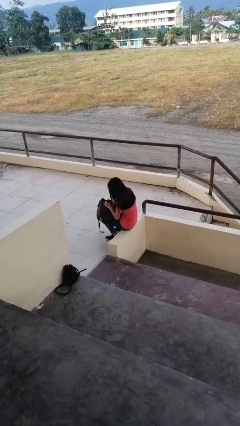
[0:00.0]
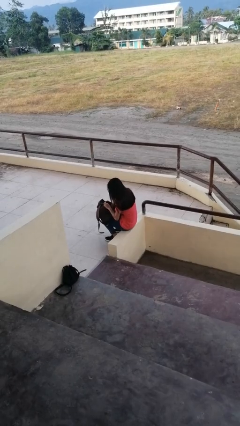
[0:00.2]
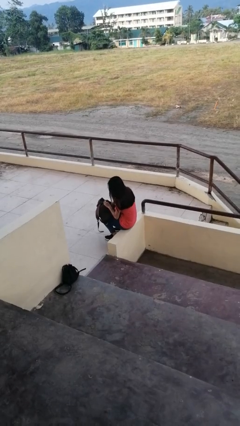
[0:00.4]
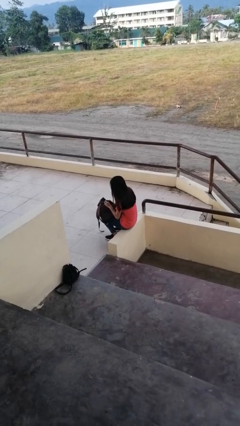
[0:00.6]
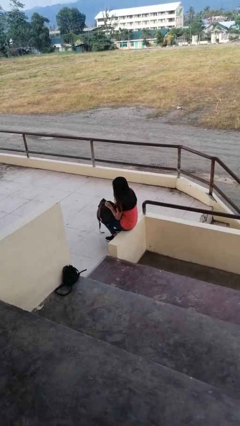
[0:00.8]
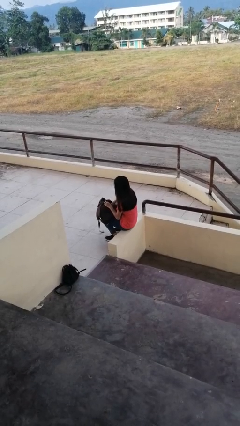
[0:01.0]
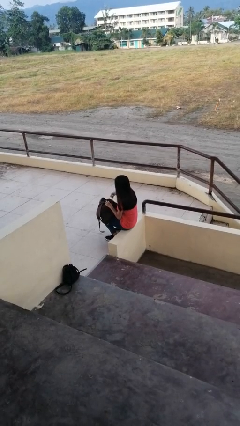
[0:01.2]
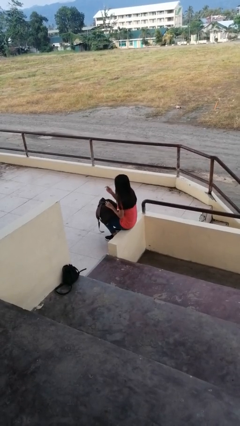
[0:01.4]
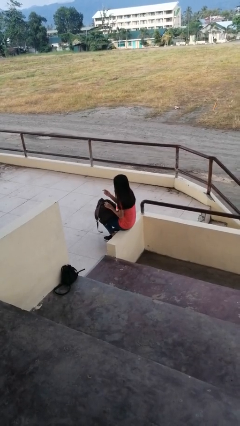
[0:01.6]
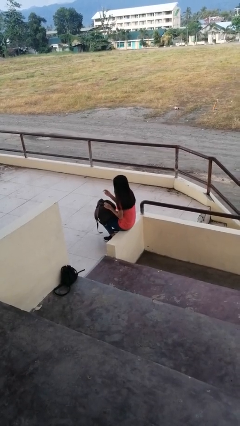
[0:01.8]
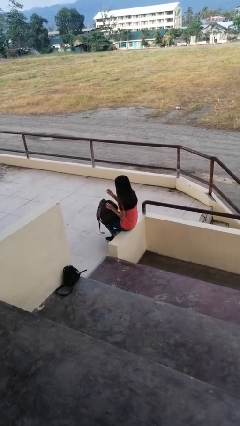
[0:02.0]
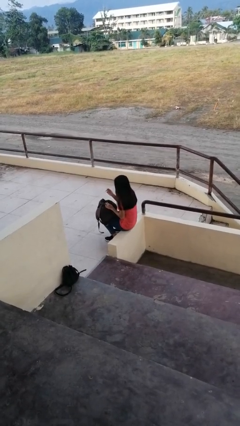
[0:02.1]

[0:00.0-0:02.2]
person takes object from backpack

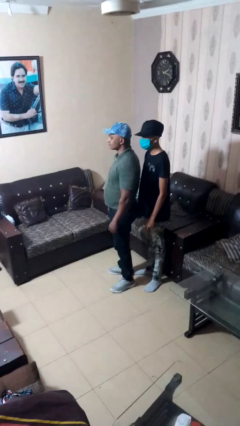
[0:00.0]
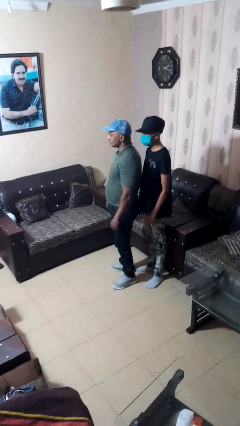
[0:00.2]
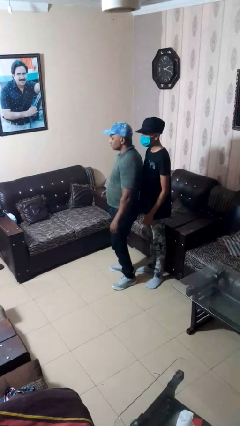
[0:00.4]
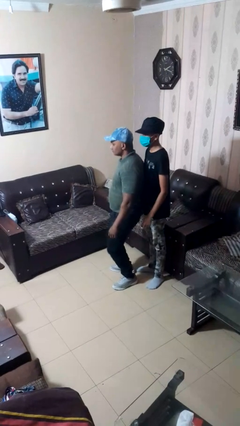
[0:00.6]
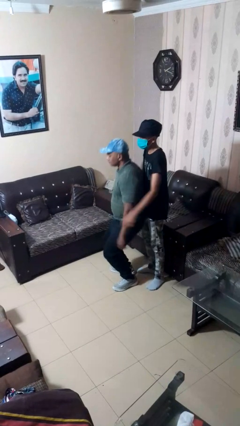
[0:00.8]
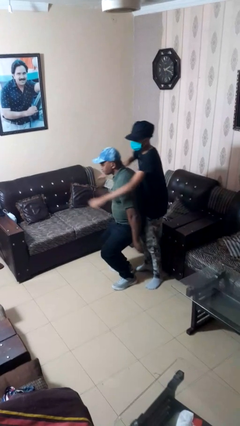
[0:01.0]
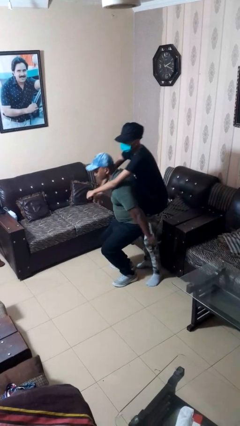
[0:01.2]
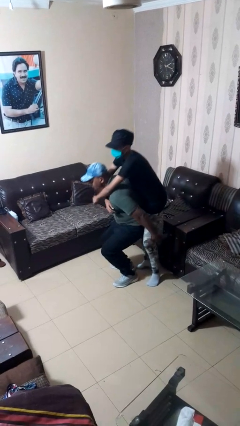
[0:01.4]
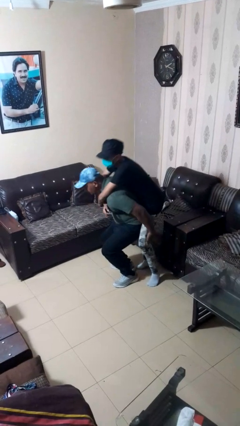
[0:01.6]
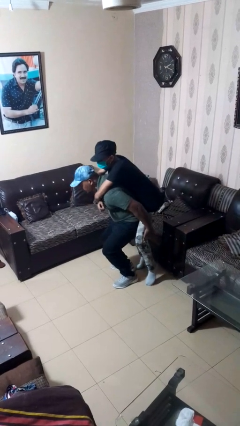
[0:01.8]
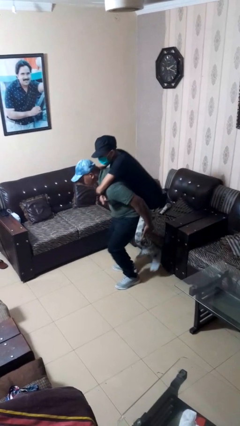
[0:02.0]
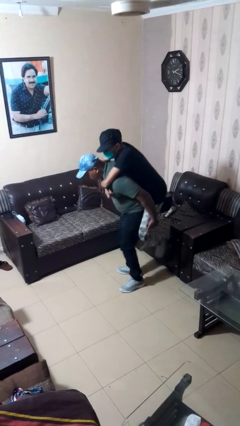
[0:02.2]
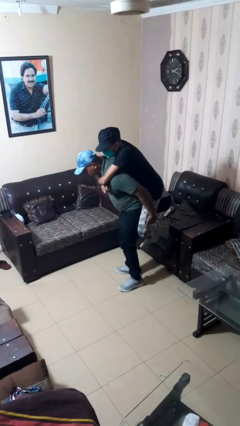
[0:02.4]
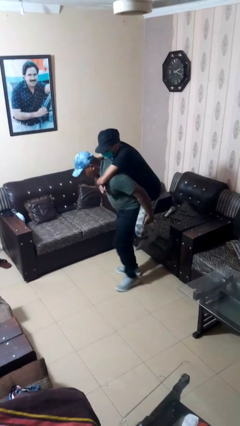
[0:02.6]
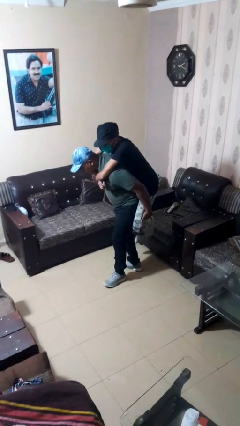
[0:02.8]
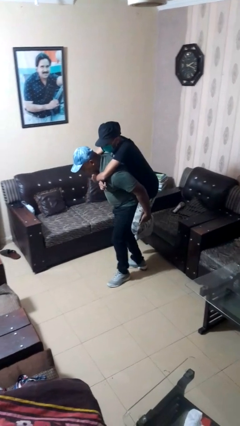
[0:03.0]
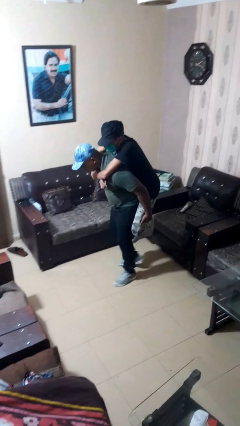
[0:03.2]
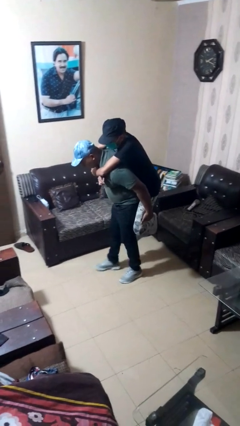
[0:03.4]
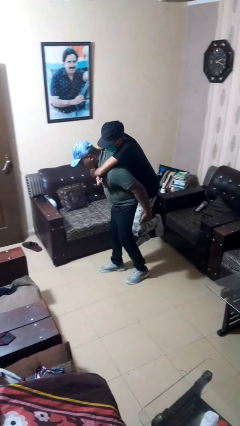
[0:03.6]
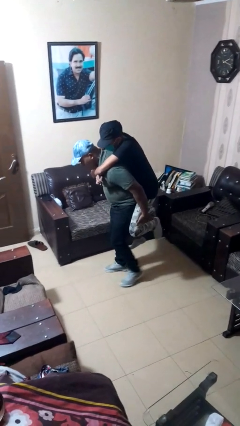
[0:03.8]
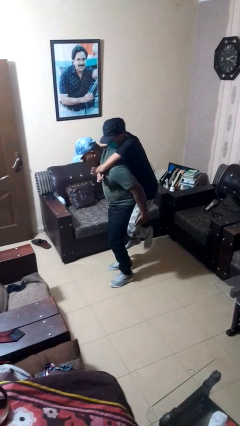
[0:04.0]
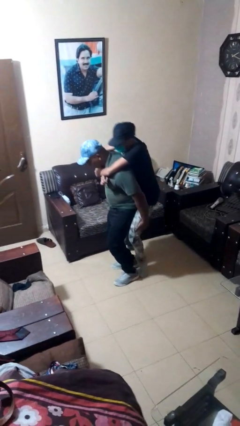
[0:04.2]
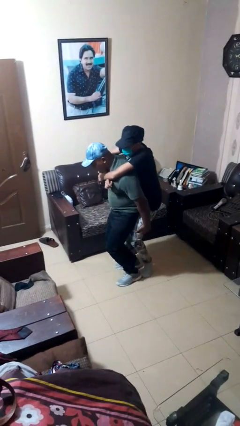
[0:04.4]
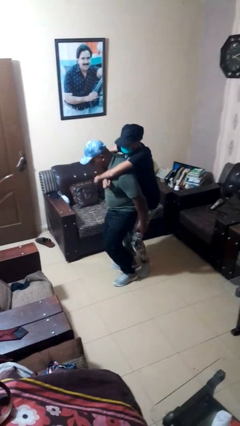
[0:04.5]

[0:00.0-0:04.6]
person carries person on back

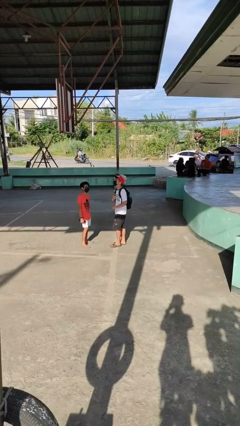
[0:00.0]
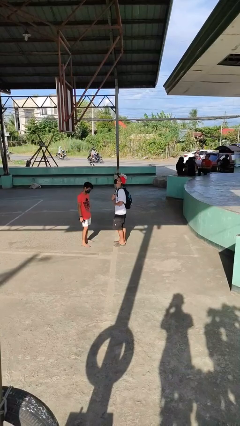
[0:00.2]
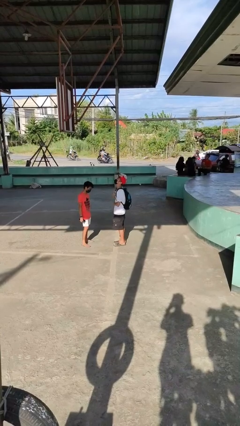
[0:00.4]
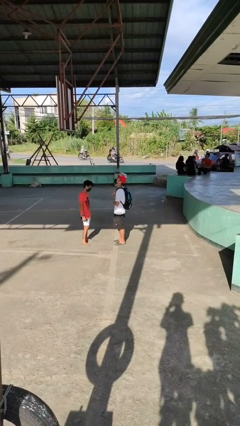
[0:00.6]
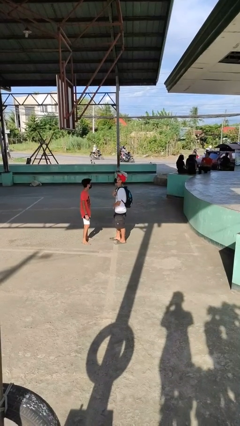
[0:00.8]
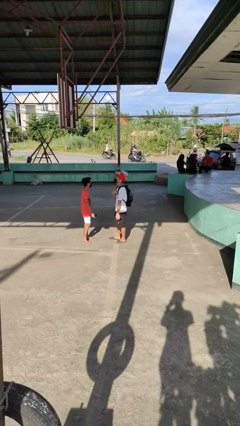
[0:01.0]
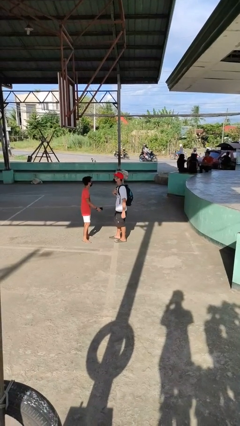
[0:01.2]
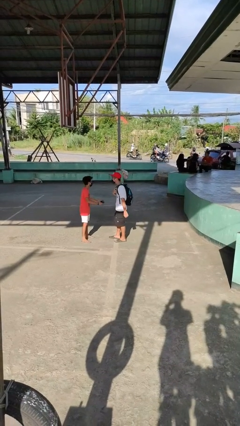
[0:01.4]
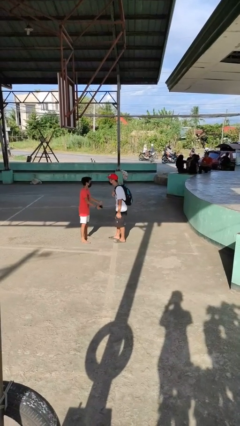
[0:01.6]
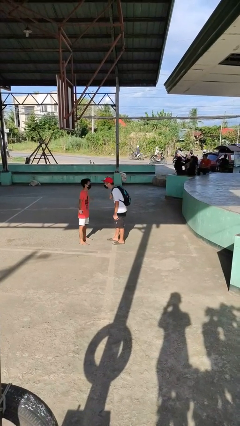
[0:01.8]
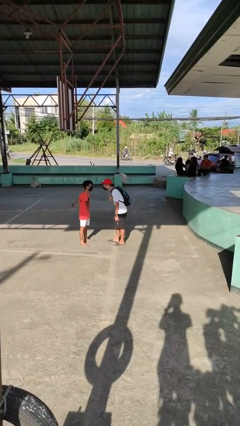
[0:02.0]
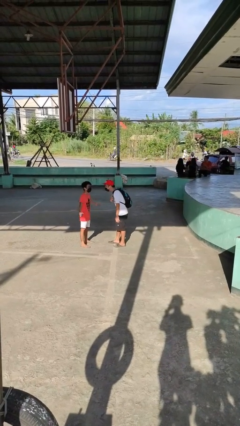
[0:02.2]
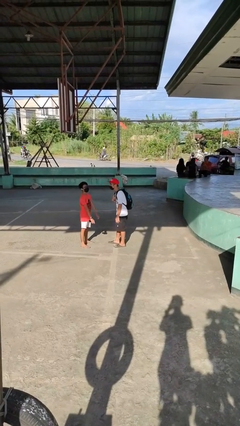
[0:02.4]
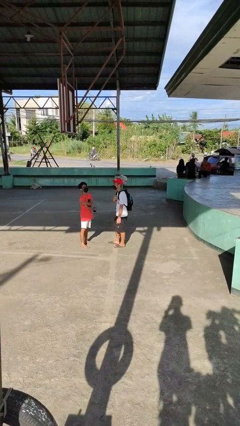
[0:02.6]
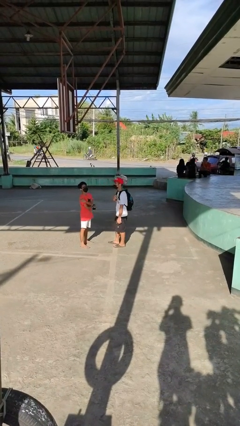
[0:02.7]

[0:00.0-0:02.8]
person laughs with person

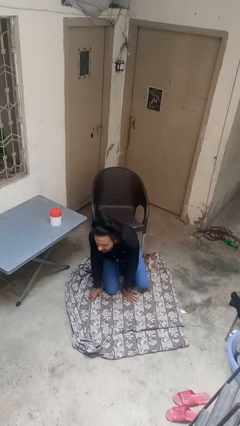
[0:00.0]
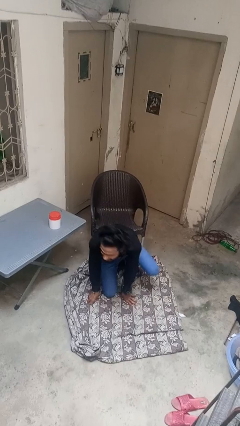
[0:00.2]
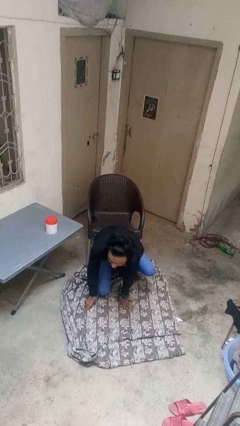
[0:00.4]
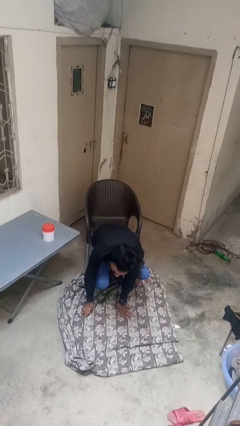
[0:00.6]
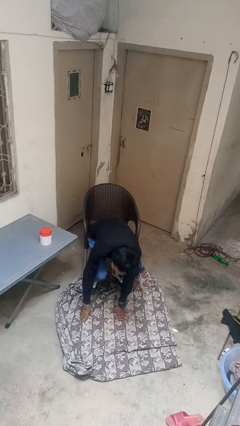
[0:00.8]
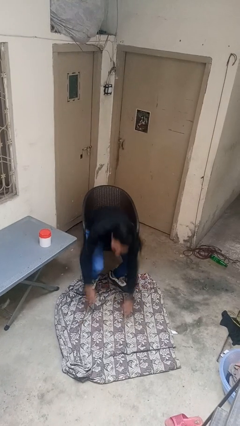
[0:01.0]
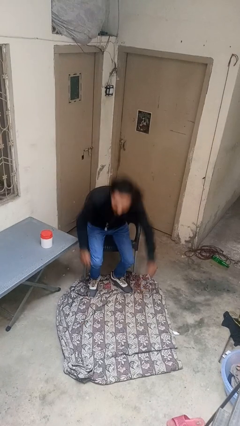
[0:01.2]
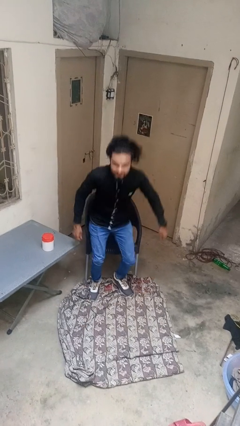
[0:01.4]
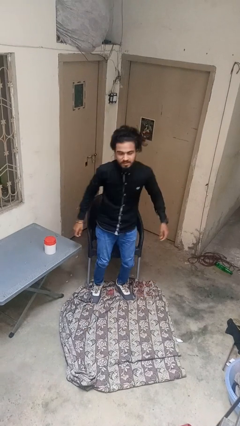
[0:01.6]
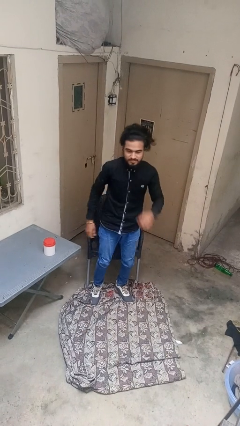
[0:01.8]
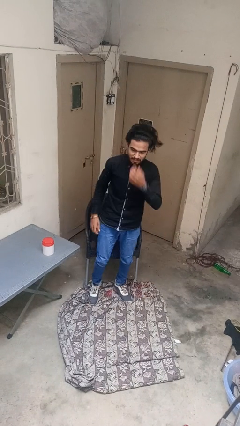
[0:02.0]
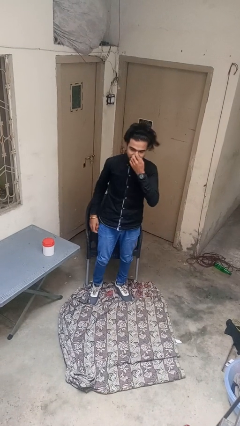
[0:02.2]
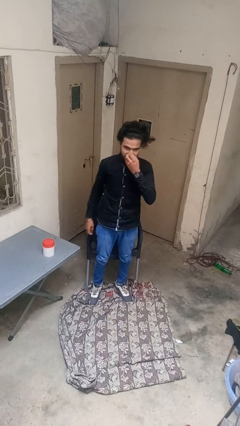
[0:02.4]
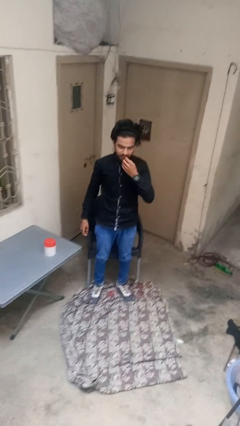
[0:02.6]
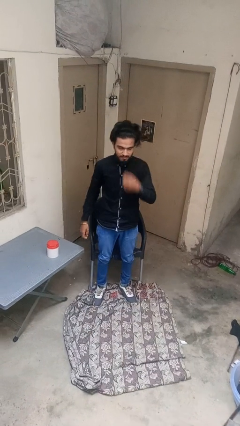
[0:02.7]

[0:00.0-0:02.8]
person stands up from floor

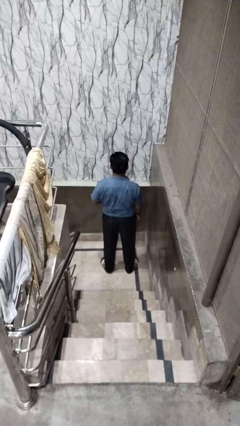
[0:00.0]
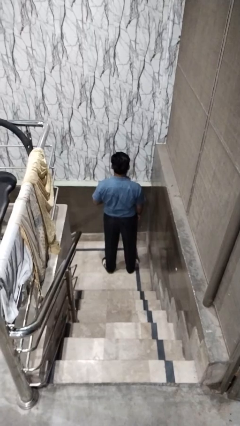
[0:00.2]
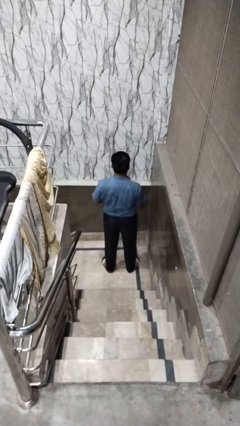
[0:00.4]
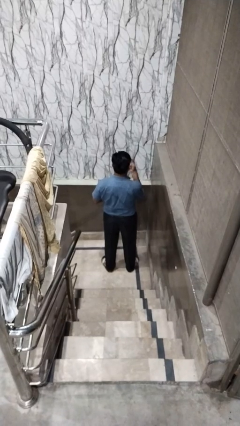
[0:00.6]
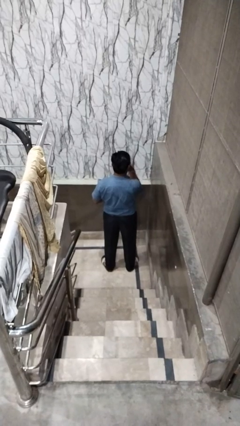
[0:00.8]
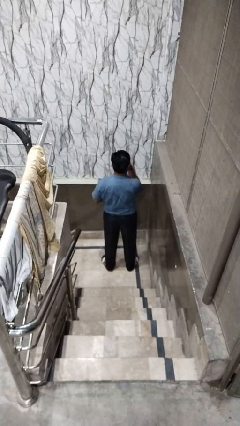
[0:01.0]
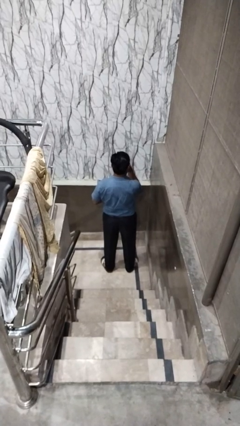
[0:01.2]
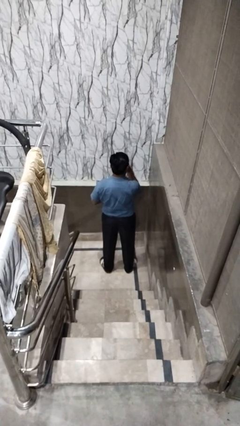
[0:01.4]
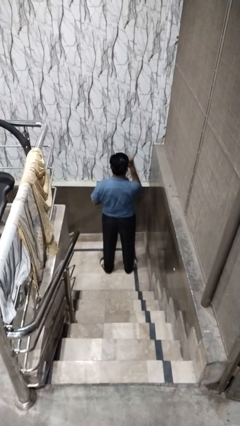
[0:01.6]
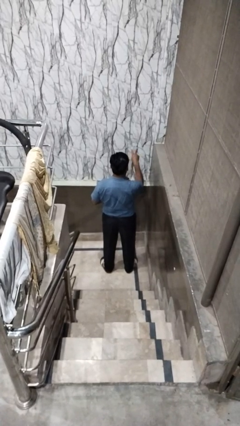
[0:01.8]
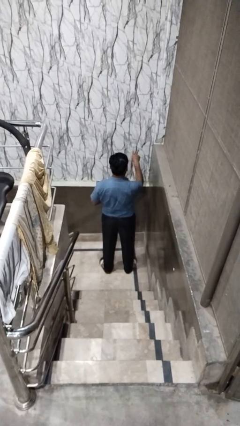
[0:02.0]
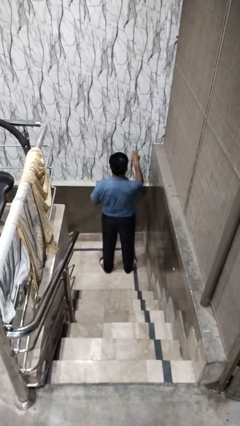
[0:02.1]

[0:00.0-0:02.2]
person gestures watch closely

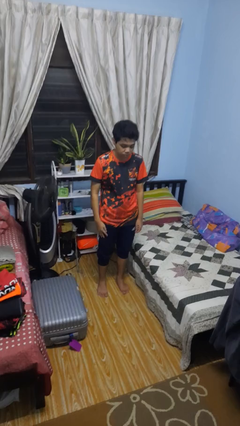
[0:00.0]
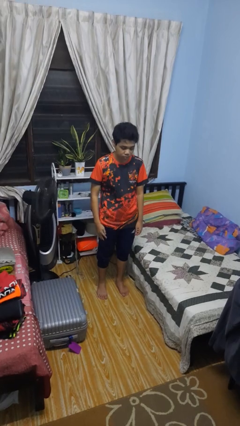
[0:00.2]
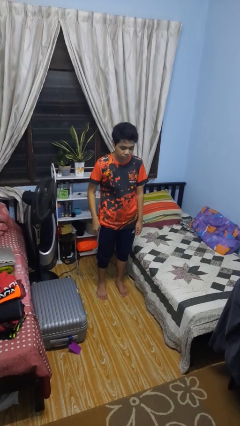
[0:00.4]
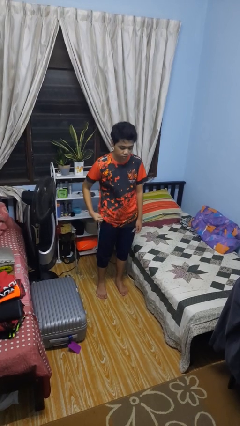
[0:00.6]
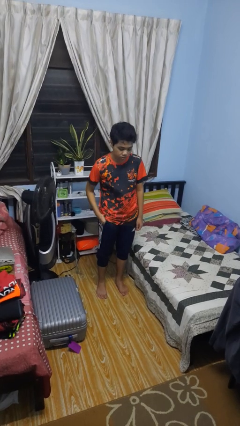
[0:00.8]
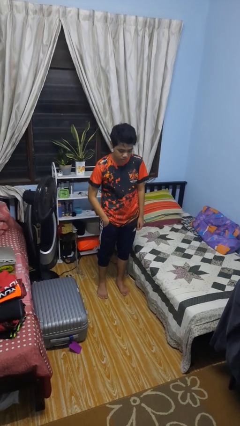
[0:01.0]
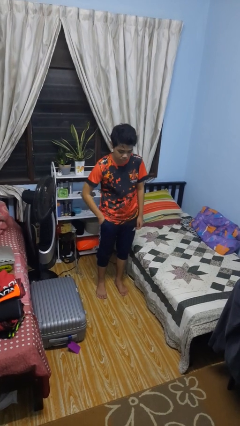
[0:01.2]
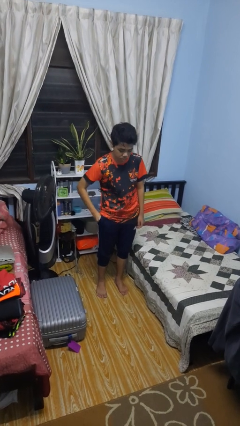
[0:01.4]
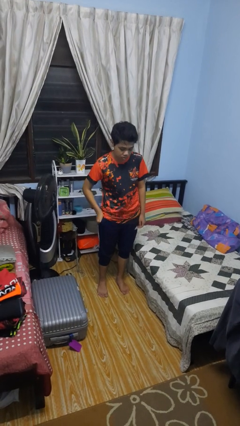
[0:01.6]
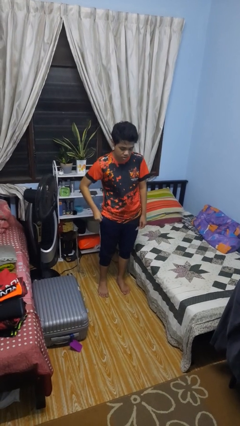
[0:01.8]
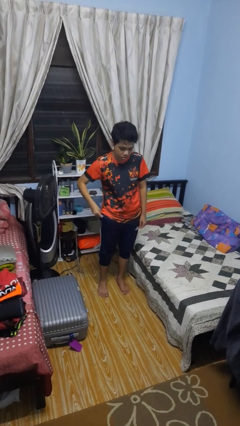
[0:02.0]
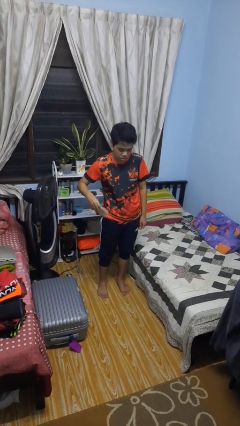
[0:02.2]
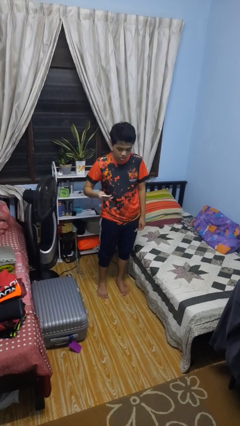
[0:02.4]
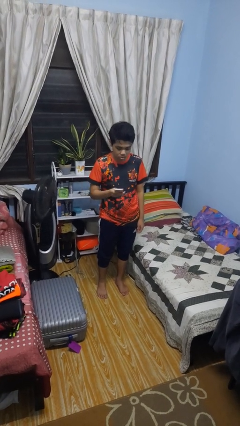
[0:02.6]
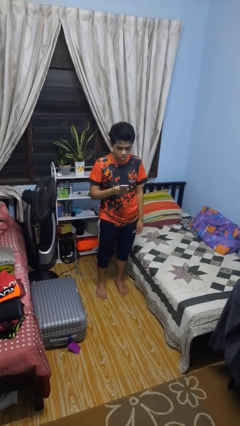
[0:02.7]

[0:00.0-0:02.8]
person takes phone from pocket

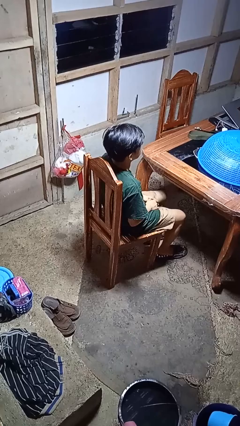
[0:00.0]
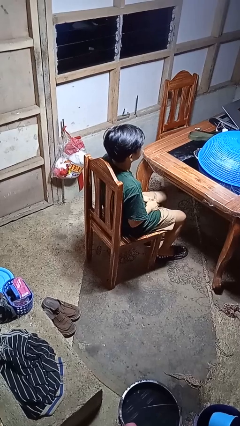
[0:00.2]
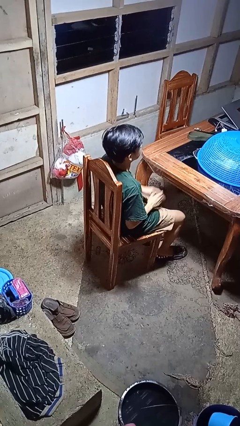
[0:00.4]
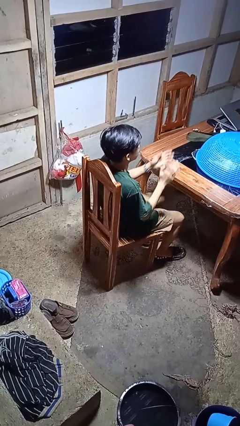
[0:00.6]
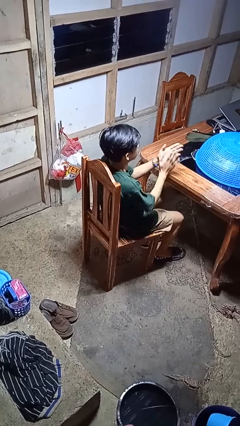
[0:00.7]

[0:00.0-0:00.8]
person claps hands
